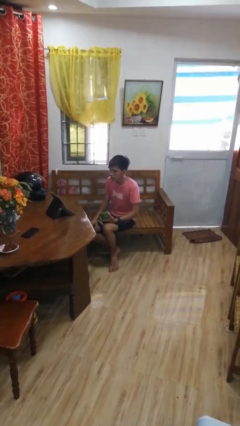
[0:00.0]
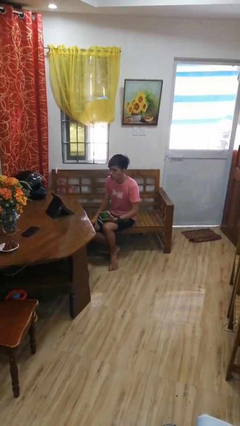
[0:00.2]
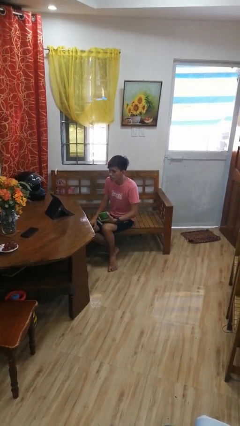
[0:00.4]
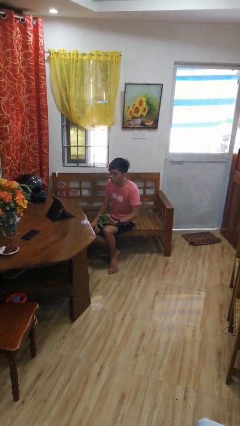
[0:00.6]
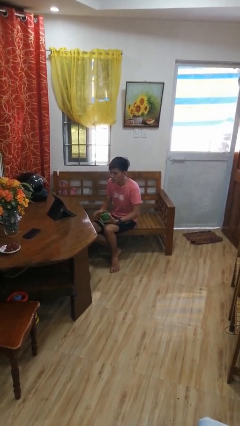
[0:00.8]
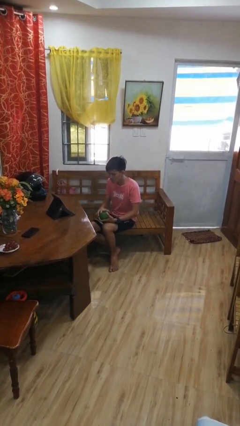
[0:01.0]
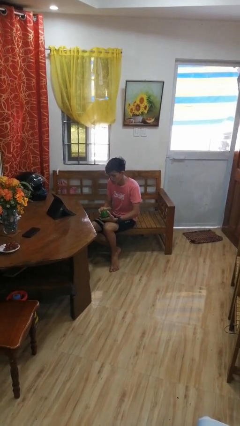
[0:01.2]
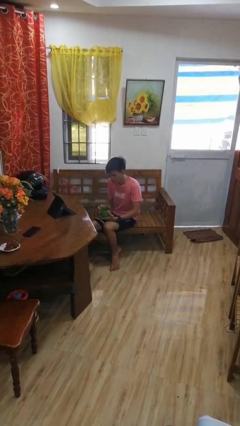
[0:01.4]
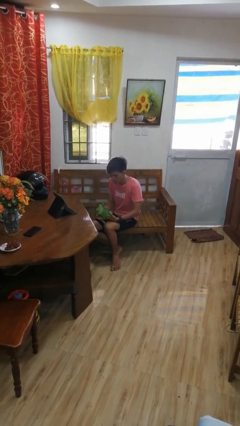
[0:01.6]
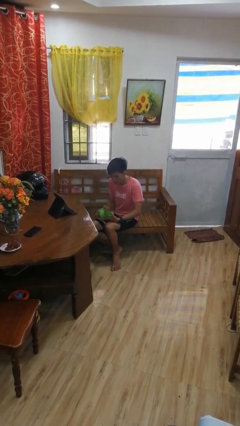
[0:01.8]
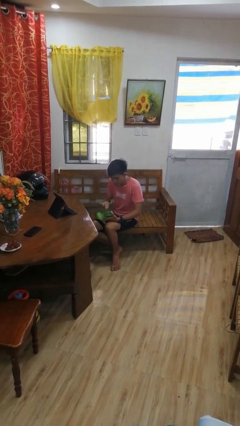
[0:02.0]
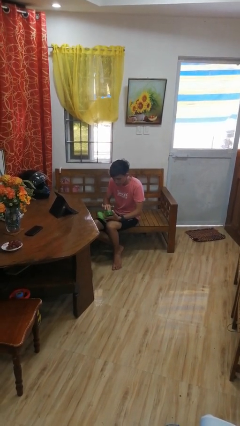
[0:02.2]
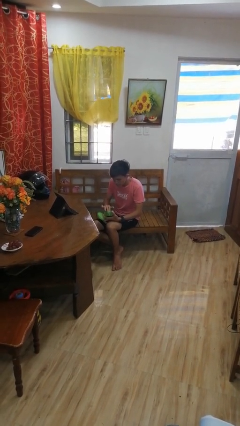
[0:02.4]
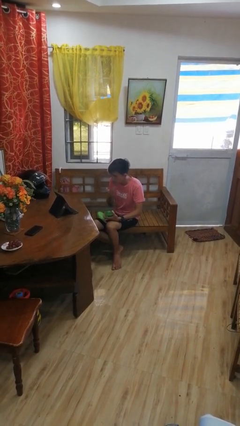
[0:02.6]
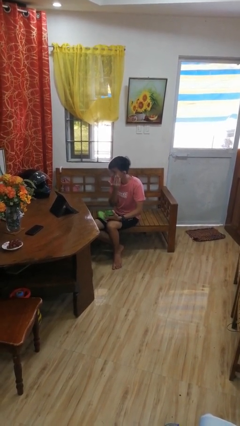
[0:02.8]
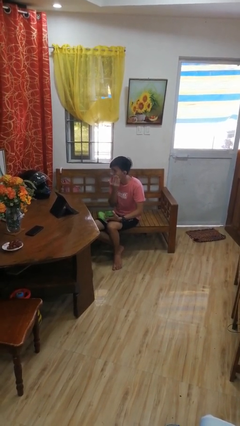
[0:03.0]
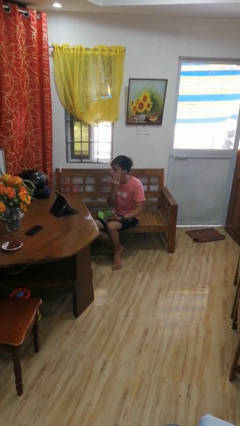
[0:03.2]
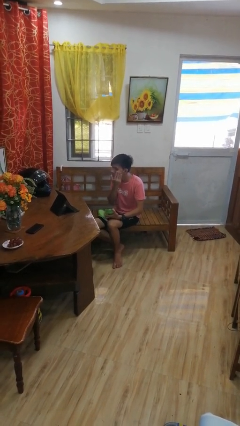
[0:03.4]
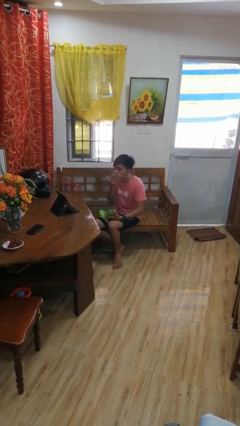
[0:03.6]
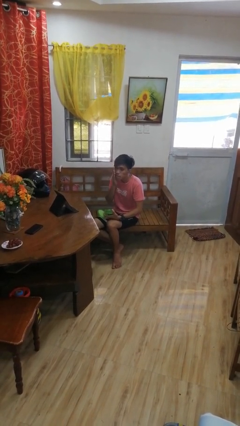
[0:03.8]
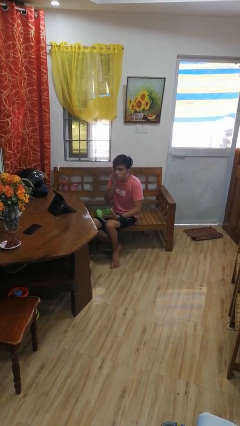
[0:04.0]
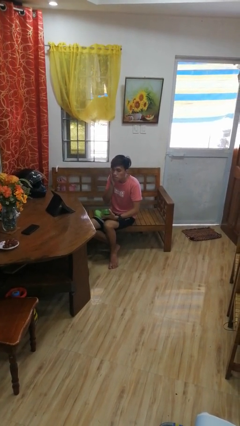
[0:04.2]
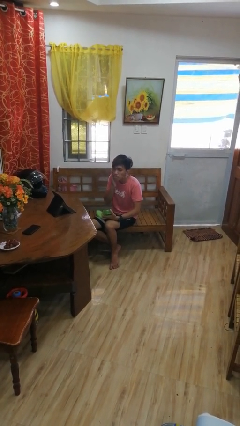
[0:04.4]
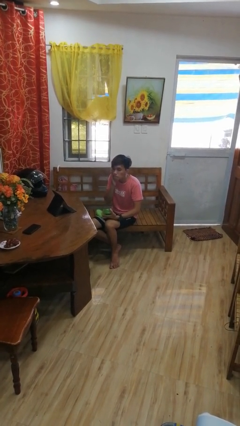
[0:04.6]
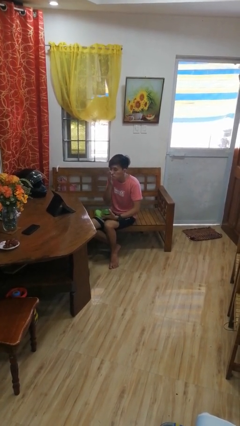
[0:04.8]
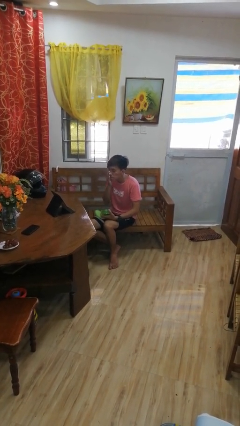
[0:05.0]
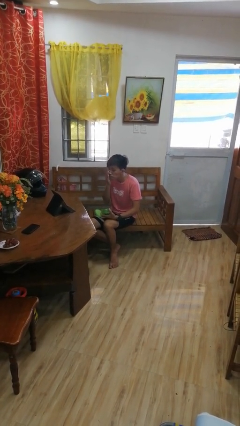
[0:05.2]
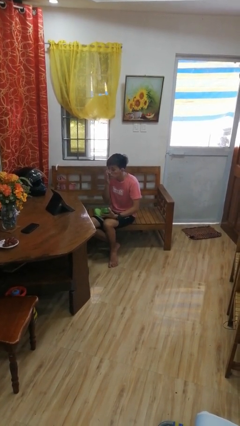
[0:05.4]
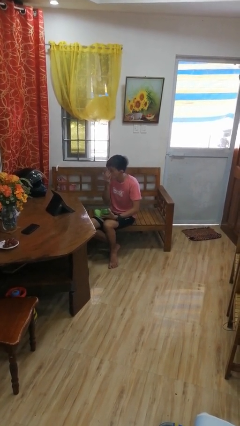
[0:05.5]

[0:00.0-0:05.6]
person applies facial moisturizer

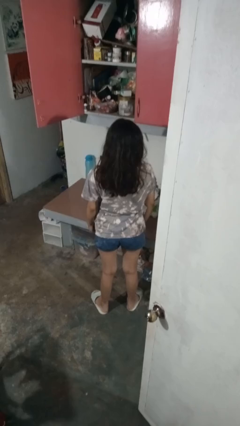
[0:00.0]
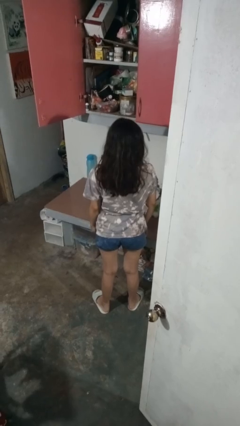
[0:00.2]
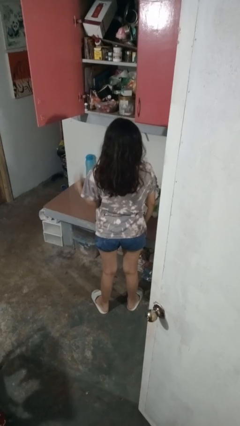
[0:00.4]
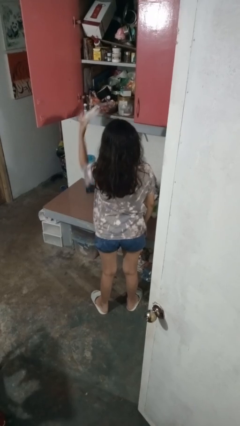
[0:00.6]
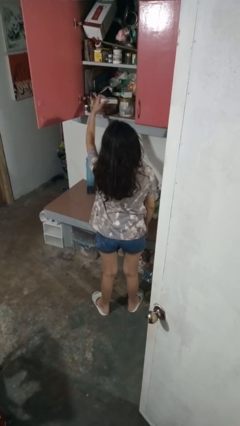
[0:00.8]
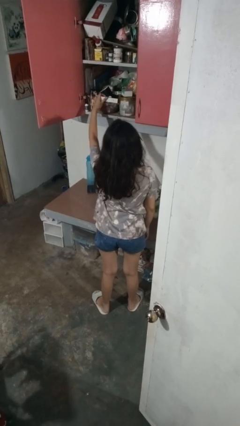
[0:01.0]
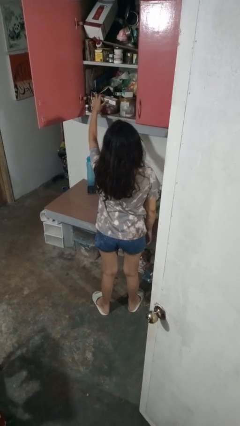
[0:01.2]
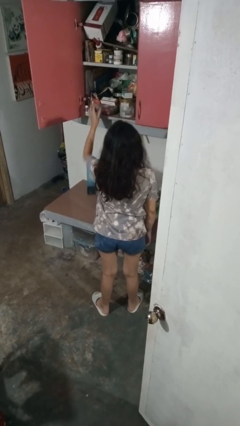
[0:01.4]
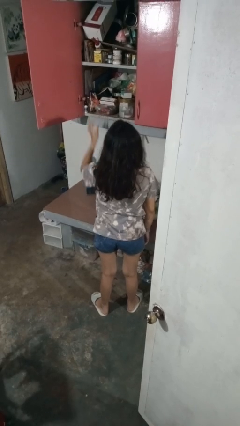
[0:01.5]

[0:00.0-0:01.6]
person puts object in cabinet

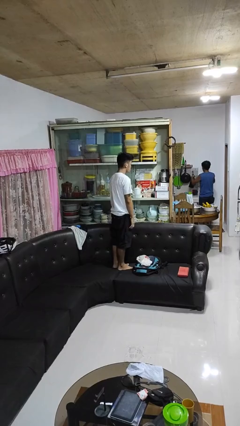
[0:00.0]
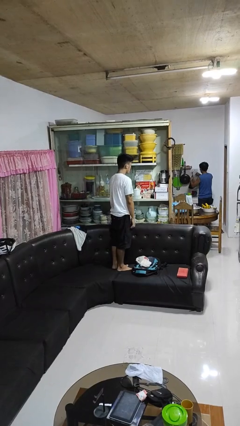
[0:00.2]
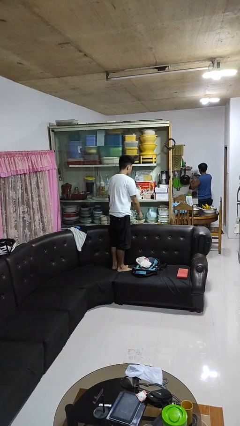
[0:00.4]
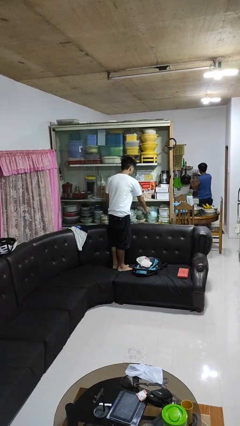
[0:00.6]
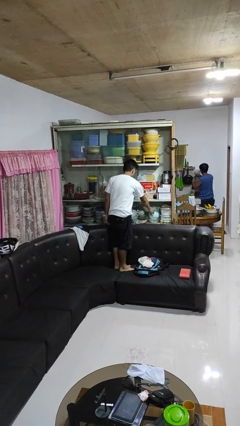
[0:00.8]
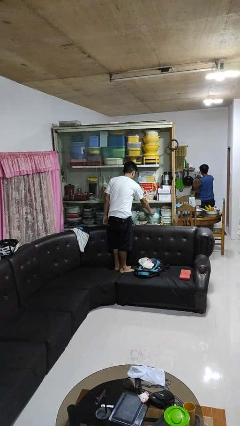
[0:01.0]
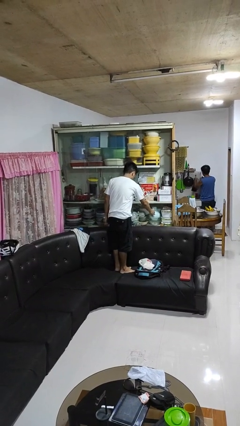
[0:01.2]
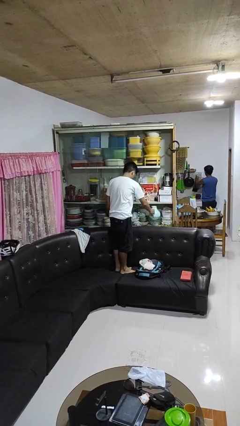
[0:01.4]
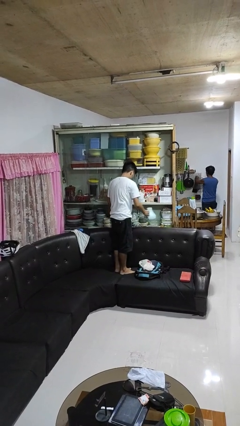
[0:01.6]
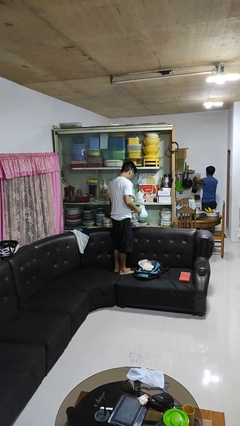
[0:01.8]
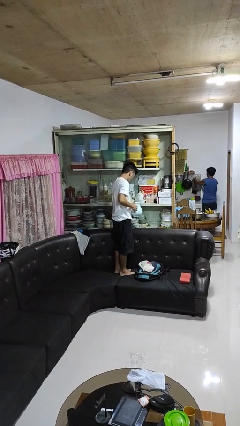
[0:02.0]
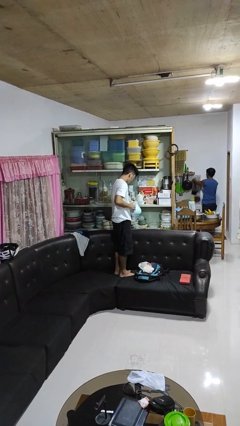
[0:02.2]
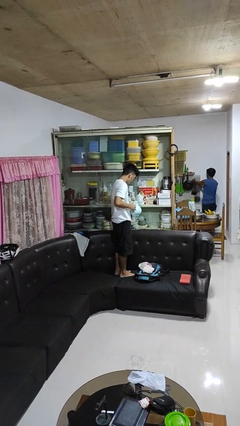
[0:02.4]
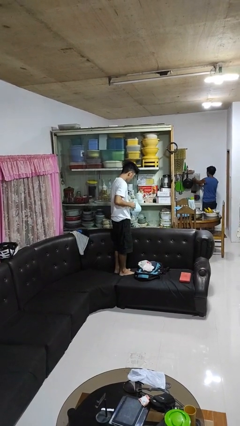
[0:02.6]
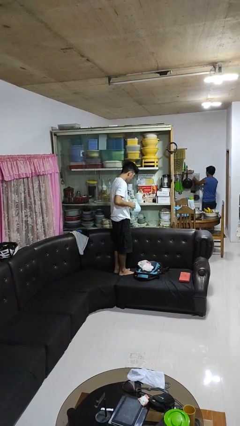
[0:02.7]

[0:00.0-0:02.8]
person picks up object from cabinet

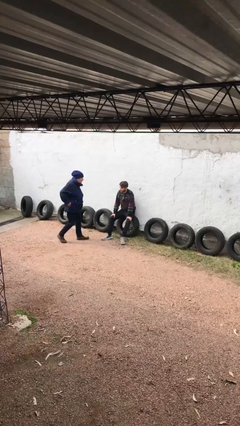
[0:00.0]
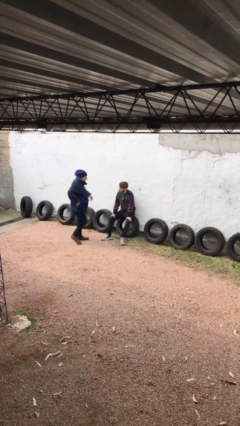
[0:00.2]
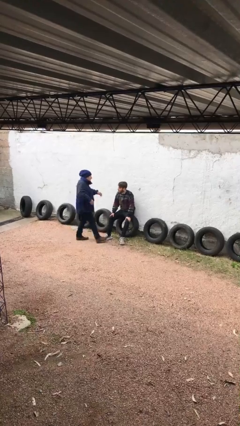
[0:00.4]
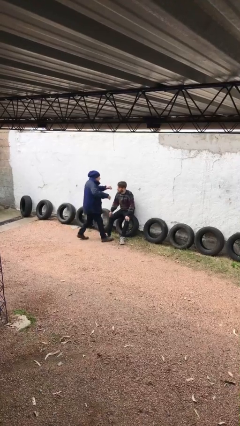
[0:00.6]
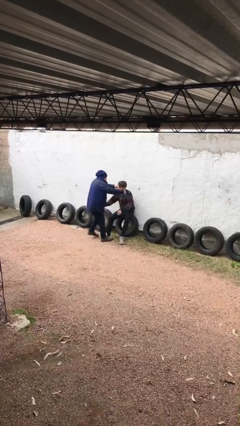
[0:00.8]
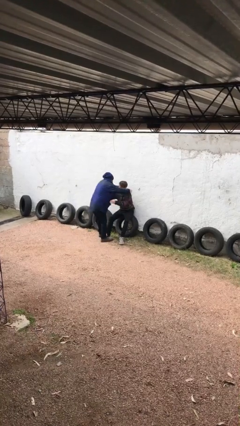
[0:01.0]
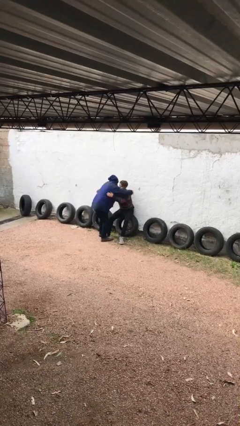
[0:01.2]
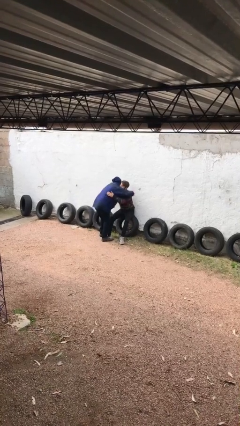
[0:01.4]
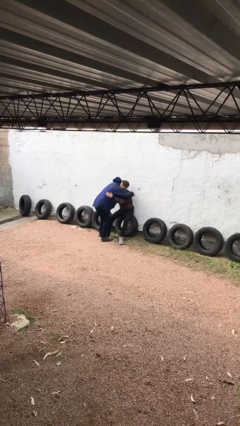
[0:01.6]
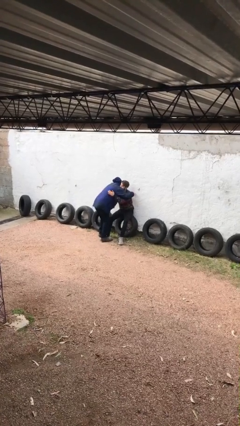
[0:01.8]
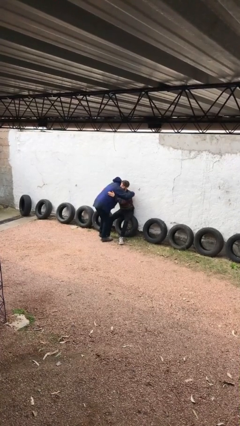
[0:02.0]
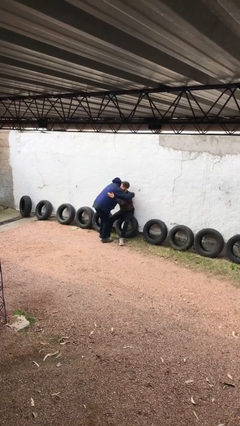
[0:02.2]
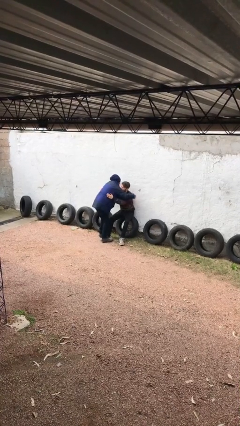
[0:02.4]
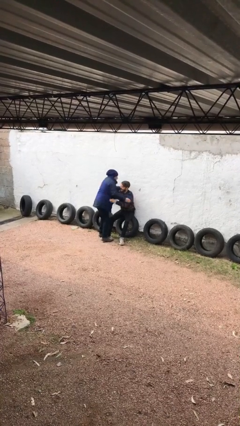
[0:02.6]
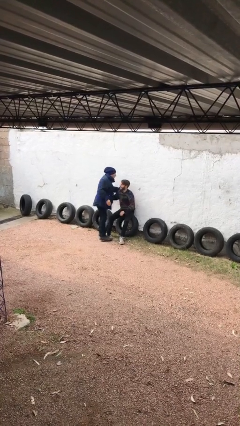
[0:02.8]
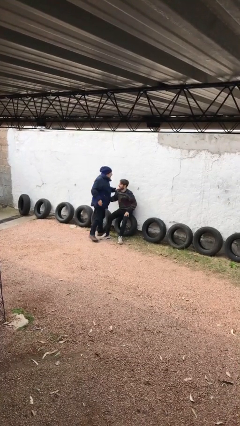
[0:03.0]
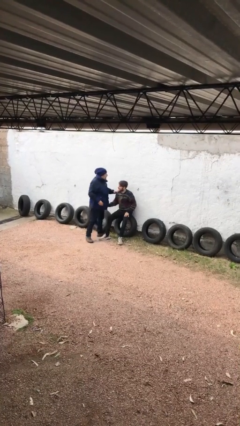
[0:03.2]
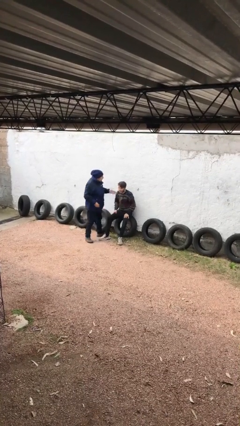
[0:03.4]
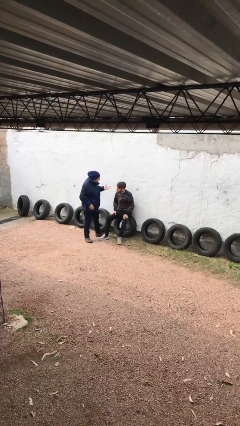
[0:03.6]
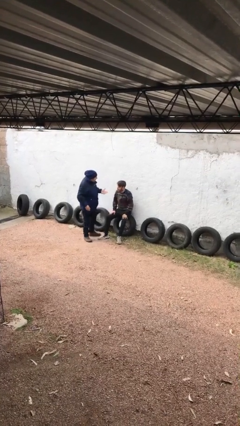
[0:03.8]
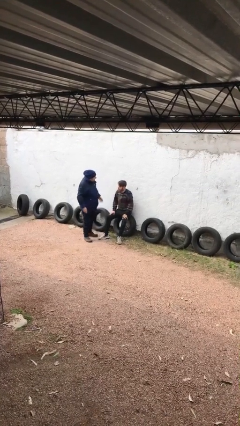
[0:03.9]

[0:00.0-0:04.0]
person embraces person

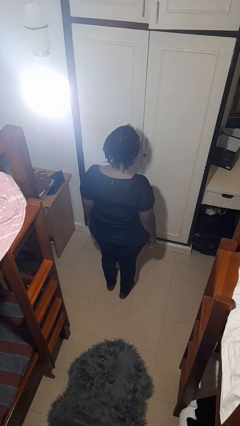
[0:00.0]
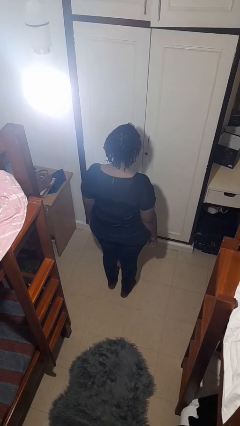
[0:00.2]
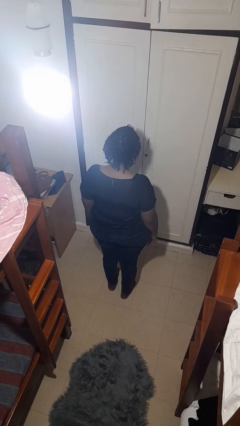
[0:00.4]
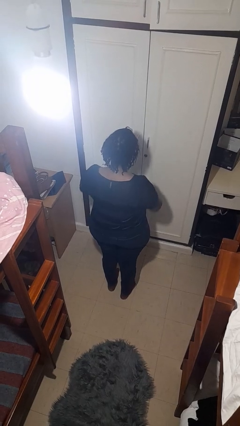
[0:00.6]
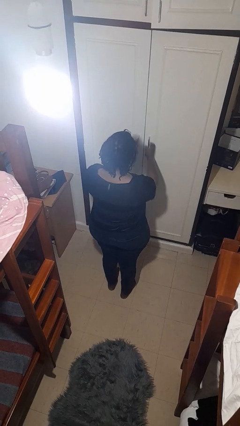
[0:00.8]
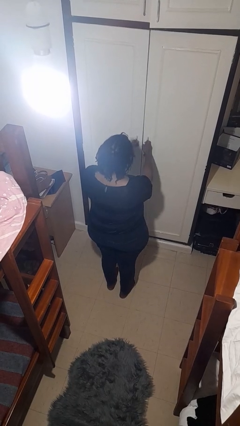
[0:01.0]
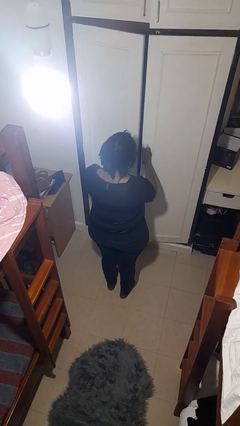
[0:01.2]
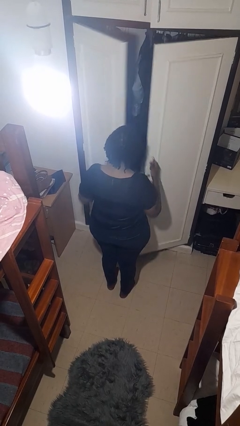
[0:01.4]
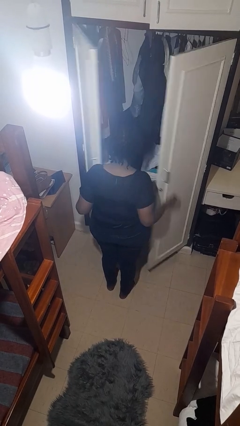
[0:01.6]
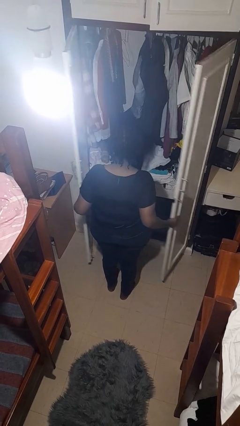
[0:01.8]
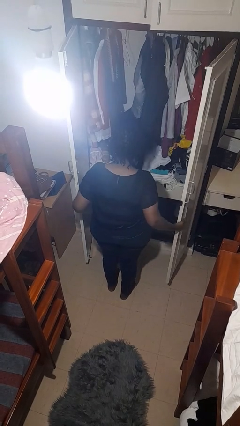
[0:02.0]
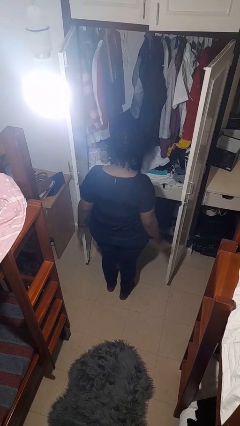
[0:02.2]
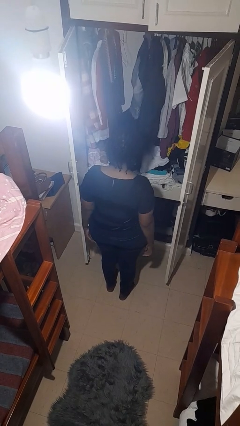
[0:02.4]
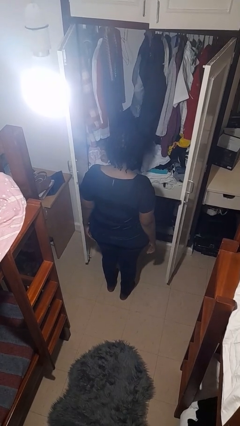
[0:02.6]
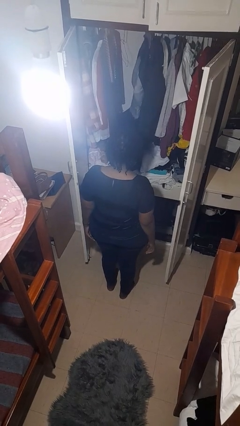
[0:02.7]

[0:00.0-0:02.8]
person opens closet door

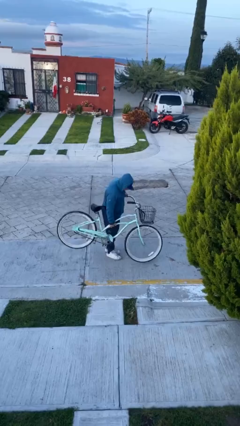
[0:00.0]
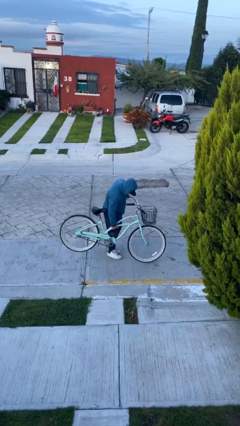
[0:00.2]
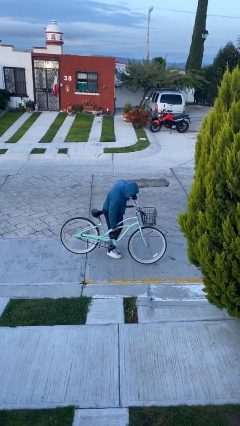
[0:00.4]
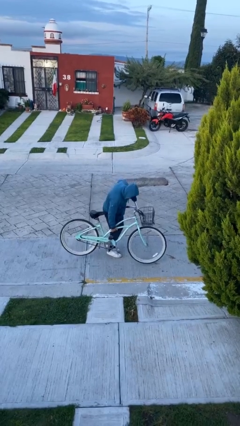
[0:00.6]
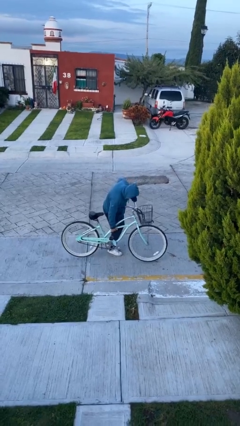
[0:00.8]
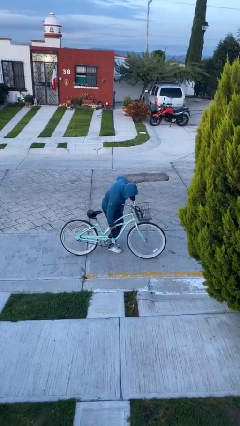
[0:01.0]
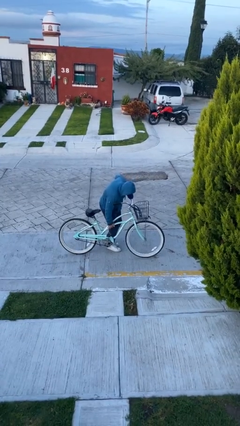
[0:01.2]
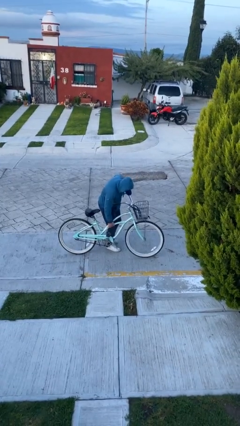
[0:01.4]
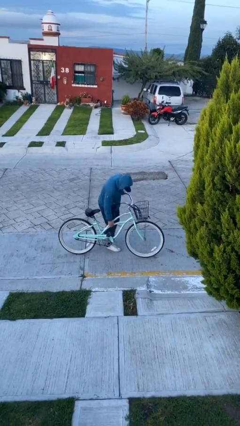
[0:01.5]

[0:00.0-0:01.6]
person puts down object on floor
